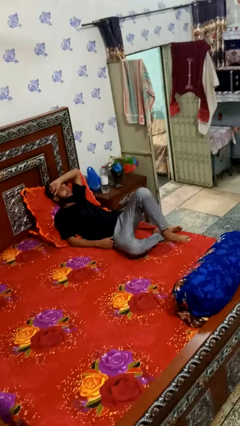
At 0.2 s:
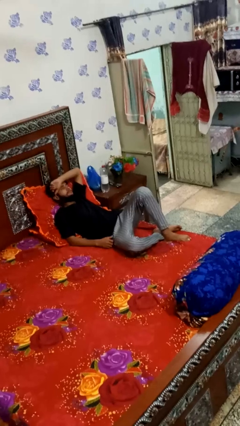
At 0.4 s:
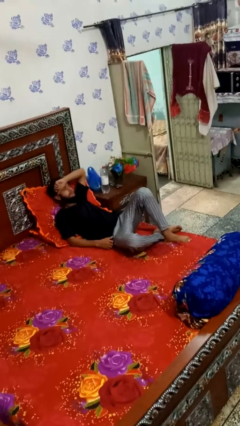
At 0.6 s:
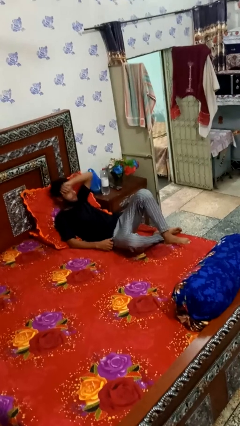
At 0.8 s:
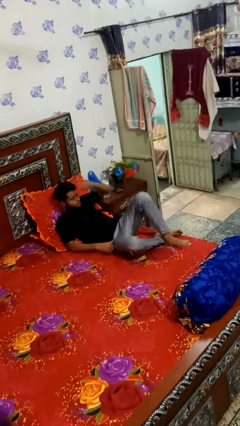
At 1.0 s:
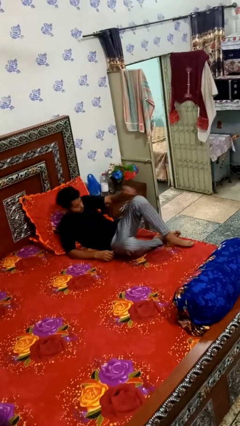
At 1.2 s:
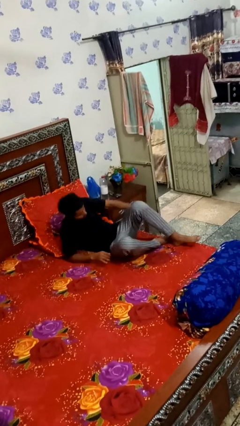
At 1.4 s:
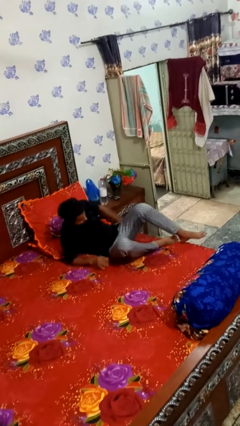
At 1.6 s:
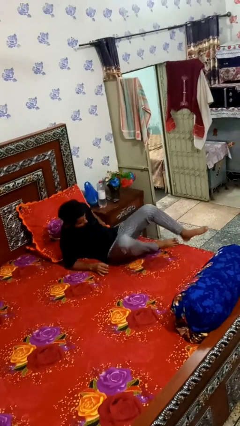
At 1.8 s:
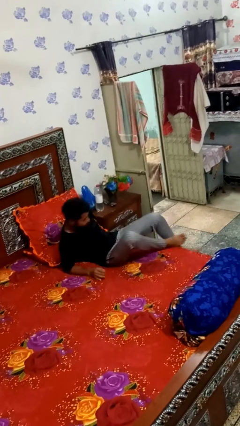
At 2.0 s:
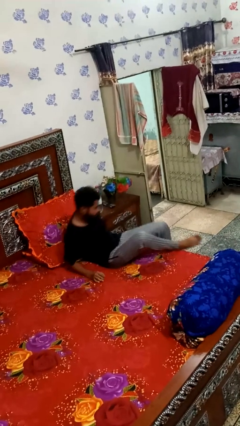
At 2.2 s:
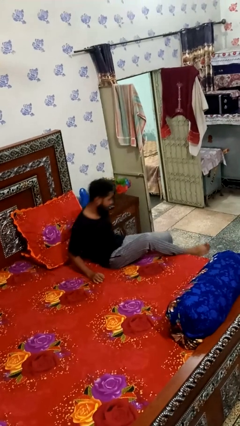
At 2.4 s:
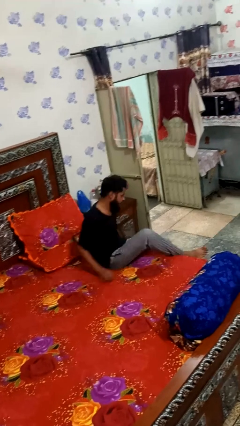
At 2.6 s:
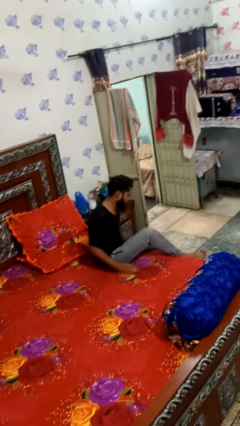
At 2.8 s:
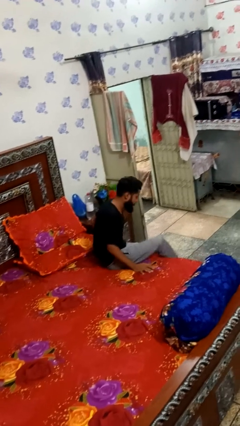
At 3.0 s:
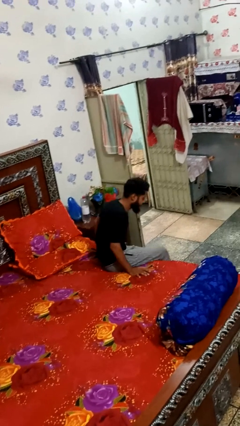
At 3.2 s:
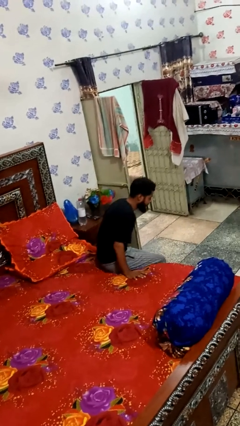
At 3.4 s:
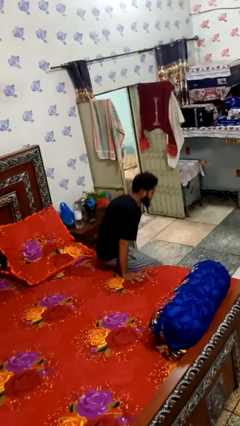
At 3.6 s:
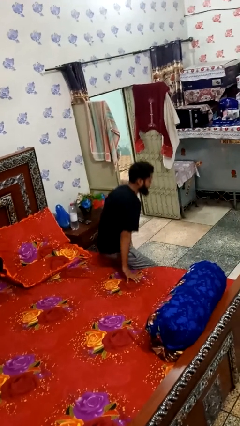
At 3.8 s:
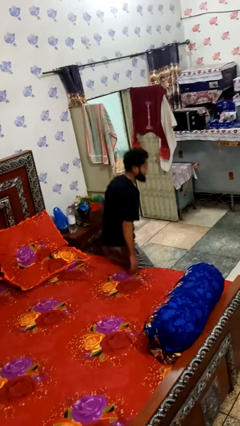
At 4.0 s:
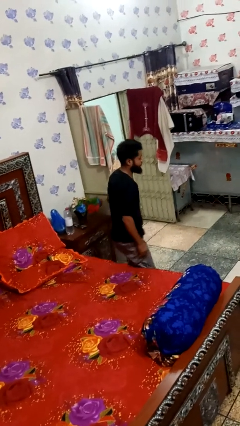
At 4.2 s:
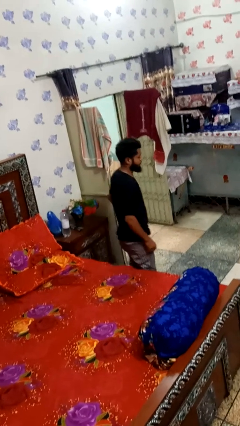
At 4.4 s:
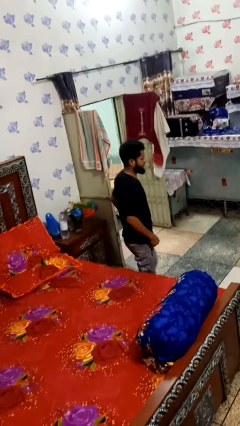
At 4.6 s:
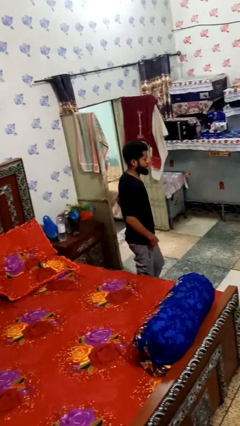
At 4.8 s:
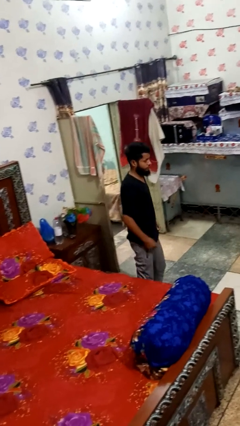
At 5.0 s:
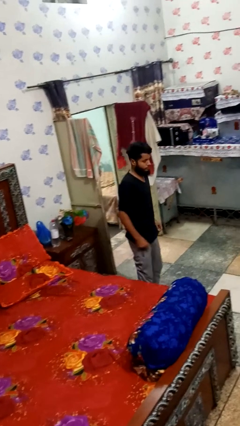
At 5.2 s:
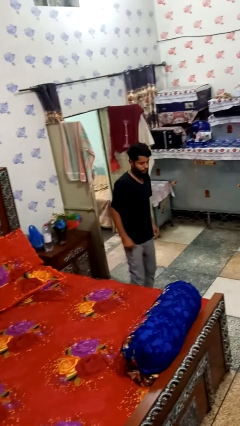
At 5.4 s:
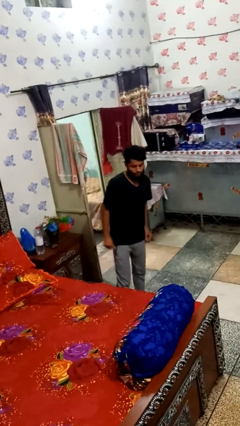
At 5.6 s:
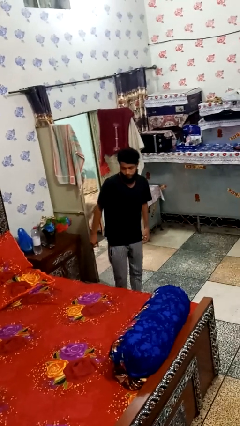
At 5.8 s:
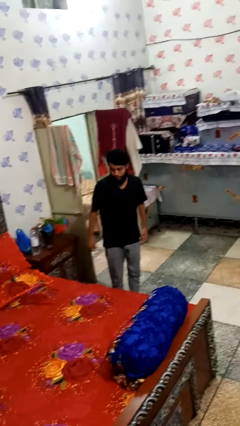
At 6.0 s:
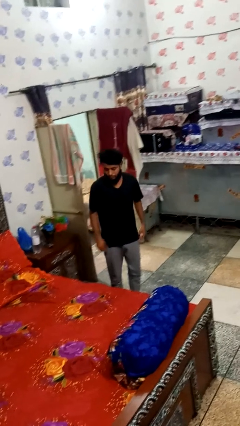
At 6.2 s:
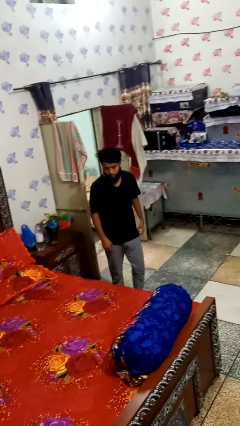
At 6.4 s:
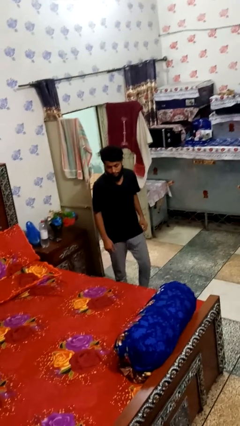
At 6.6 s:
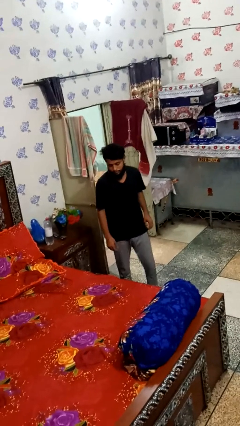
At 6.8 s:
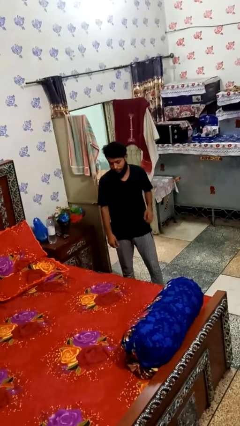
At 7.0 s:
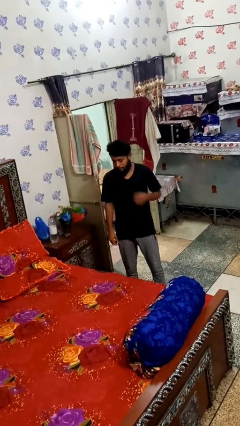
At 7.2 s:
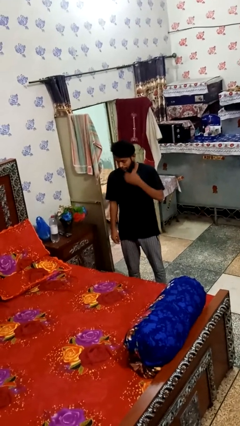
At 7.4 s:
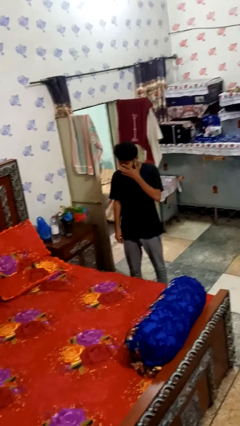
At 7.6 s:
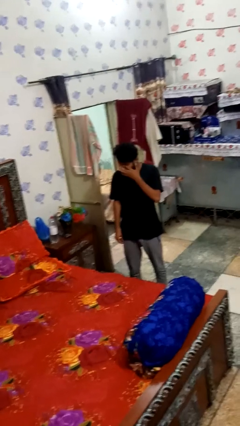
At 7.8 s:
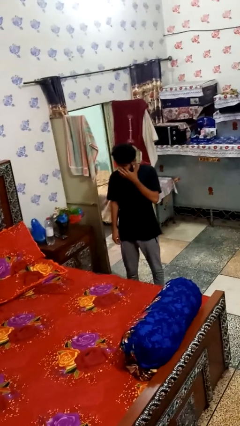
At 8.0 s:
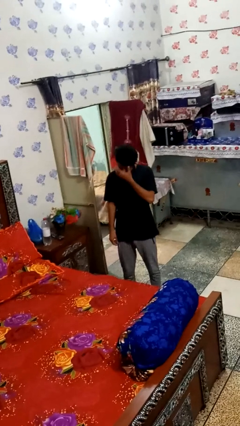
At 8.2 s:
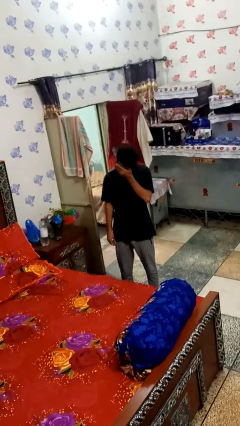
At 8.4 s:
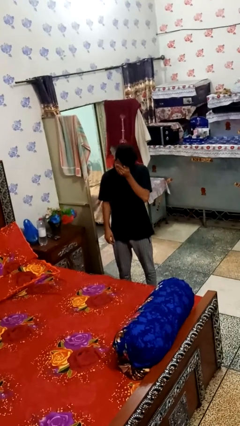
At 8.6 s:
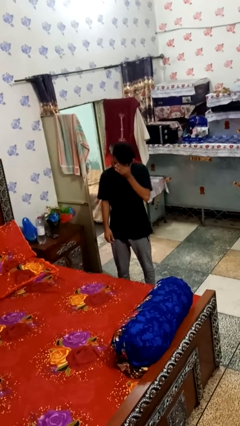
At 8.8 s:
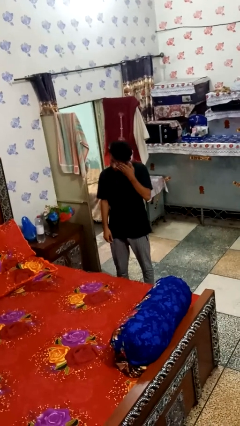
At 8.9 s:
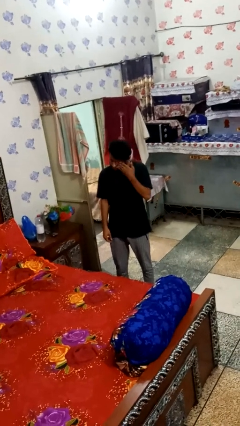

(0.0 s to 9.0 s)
person stands up

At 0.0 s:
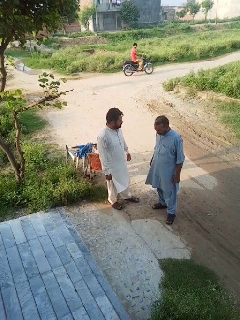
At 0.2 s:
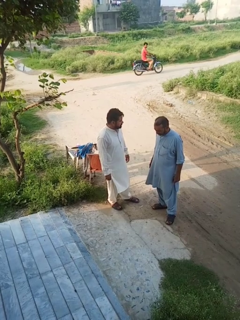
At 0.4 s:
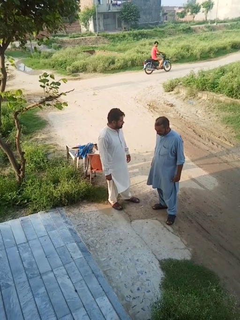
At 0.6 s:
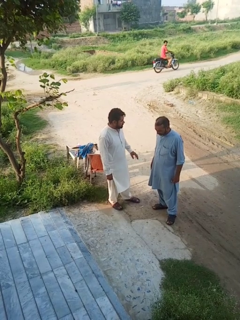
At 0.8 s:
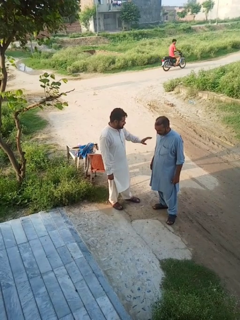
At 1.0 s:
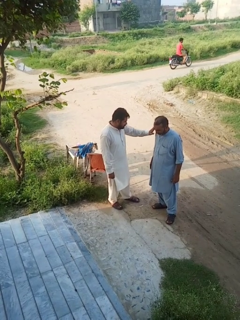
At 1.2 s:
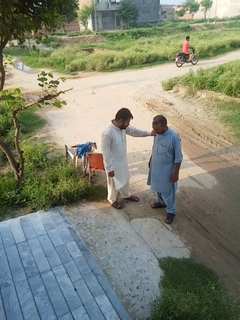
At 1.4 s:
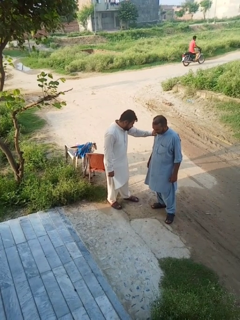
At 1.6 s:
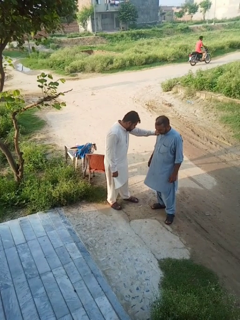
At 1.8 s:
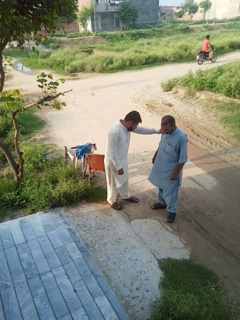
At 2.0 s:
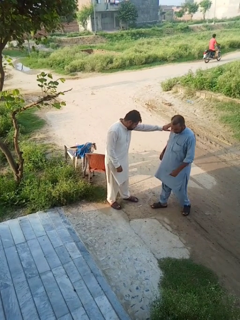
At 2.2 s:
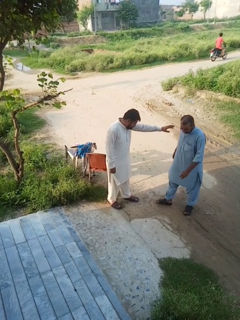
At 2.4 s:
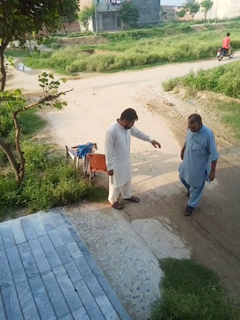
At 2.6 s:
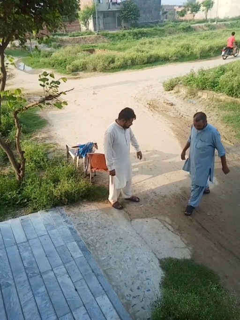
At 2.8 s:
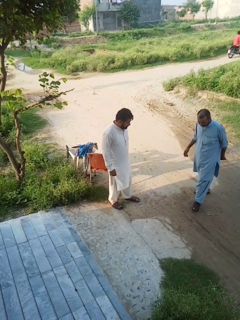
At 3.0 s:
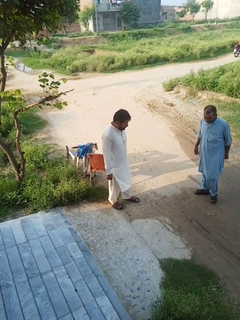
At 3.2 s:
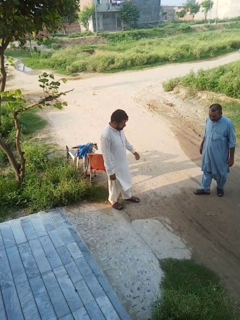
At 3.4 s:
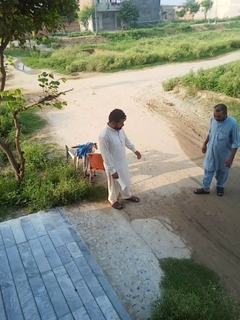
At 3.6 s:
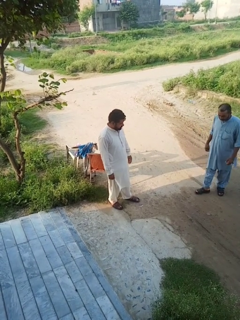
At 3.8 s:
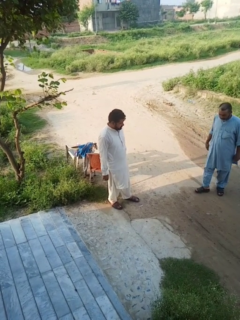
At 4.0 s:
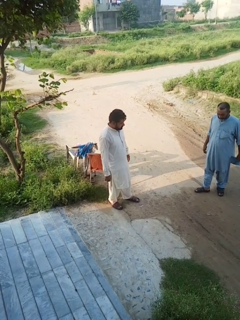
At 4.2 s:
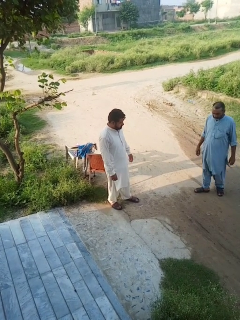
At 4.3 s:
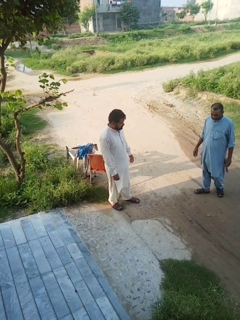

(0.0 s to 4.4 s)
person shoves person

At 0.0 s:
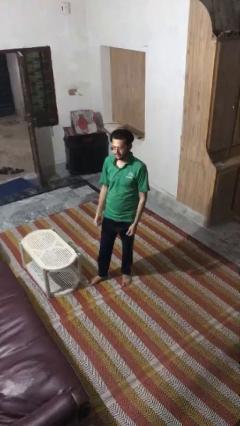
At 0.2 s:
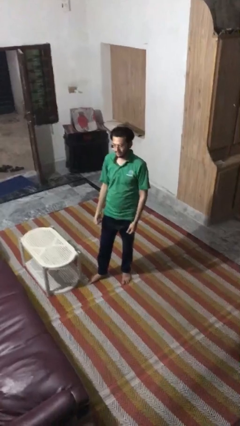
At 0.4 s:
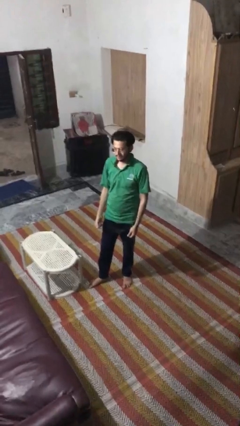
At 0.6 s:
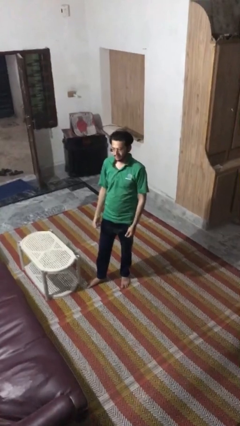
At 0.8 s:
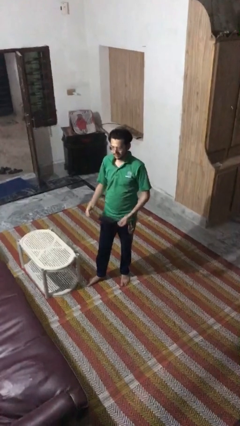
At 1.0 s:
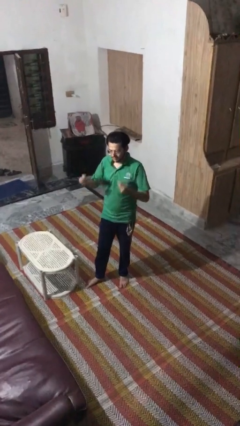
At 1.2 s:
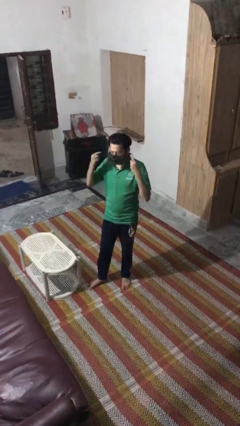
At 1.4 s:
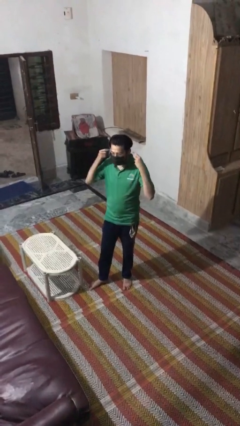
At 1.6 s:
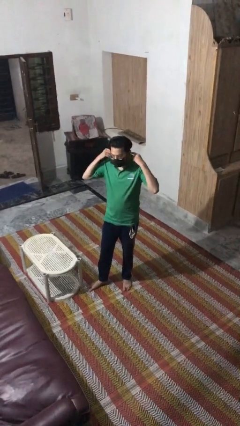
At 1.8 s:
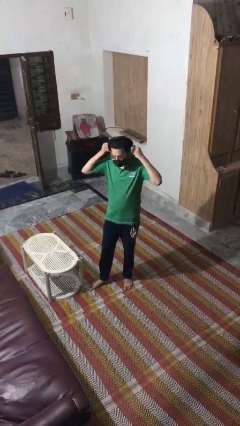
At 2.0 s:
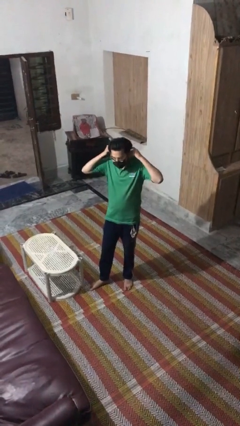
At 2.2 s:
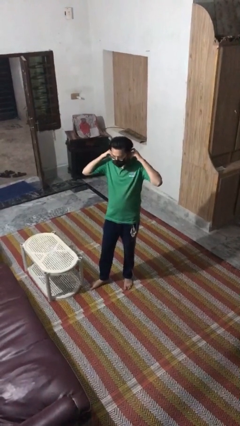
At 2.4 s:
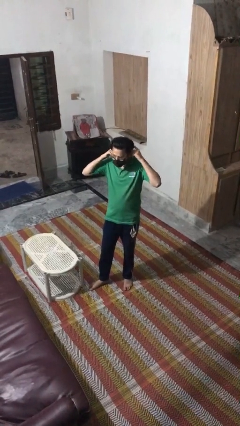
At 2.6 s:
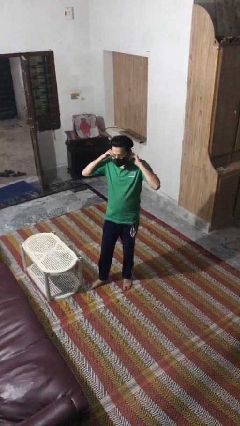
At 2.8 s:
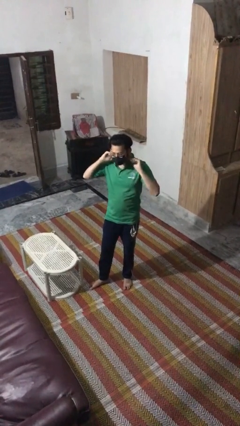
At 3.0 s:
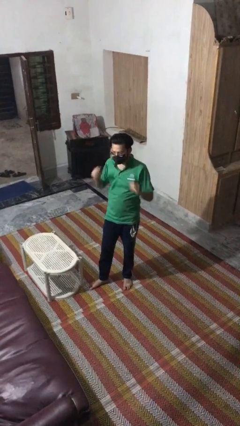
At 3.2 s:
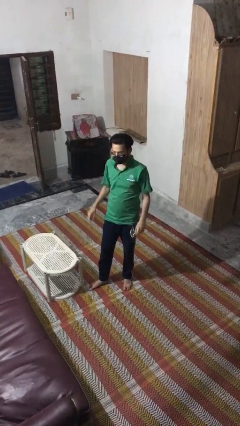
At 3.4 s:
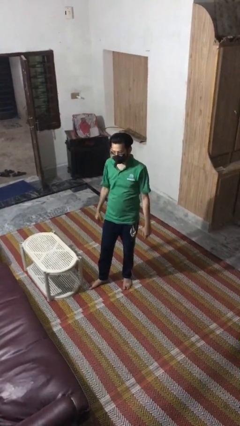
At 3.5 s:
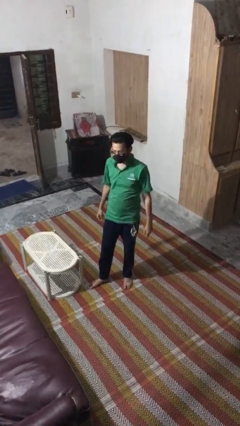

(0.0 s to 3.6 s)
person puts on facemask

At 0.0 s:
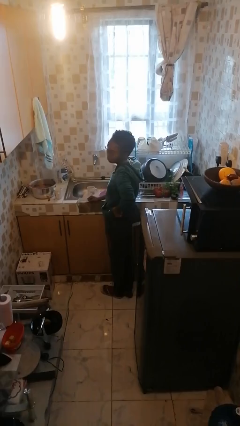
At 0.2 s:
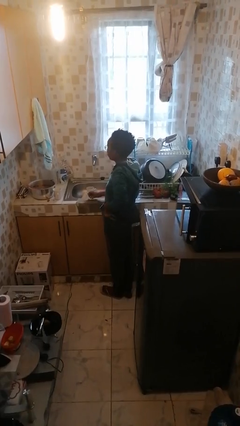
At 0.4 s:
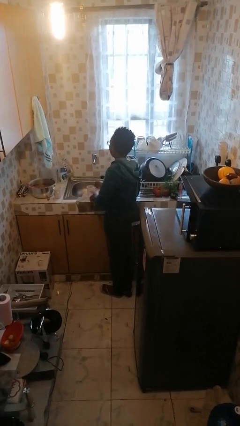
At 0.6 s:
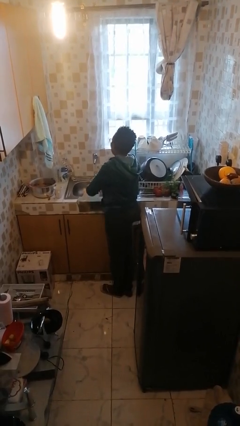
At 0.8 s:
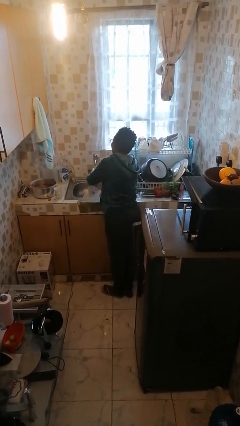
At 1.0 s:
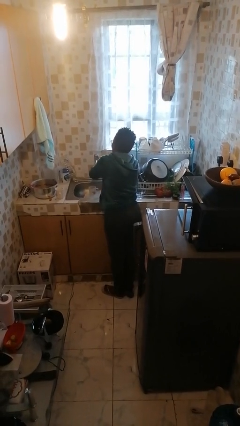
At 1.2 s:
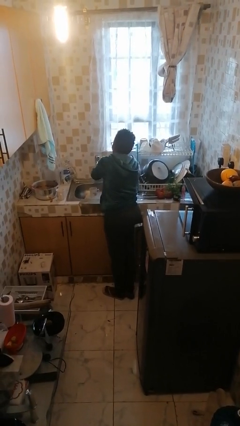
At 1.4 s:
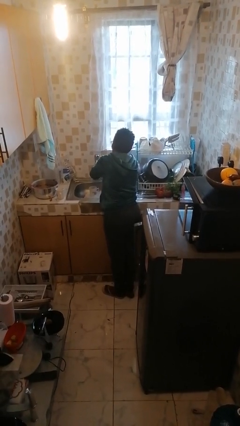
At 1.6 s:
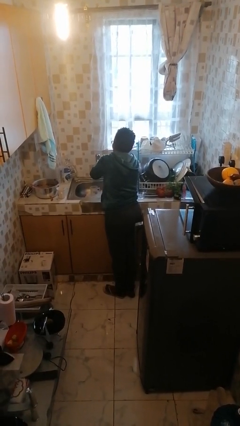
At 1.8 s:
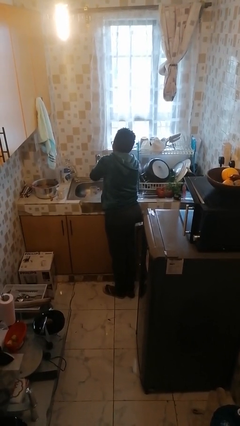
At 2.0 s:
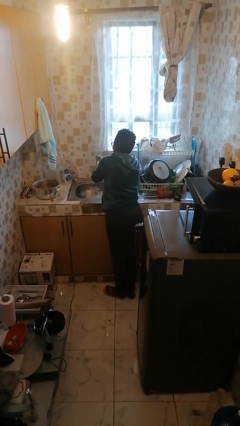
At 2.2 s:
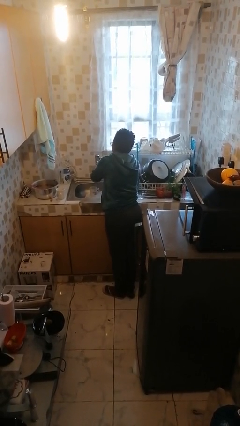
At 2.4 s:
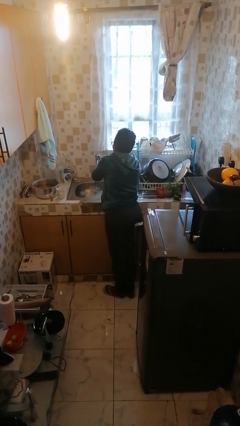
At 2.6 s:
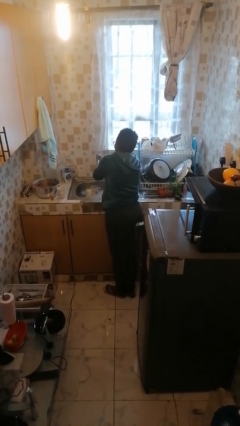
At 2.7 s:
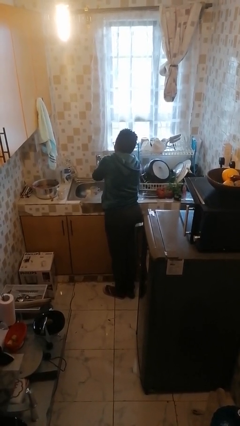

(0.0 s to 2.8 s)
person washes hands
